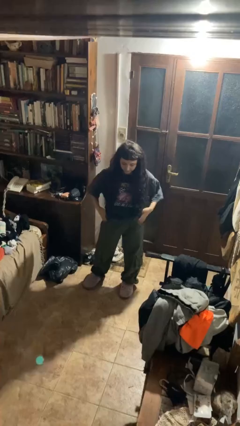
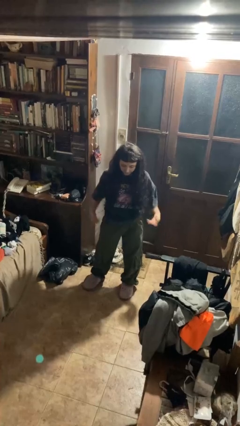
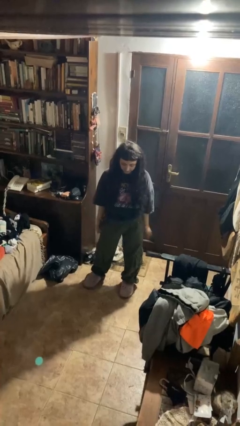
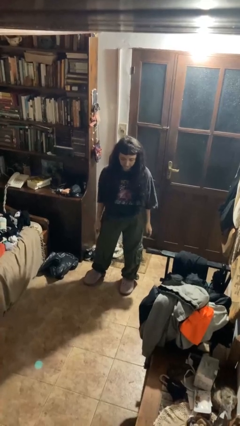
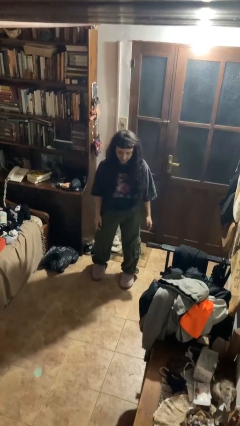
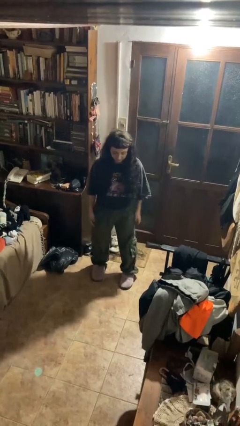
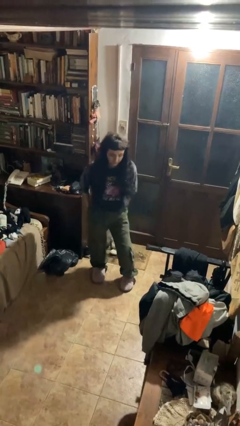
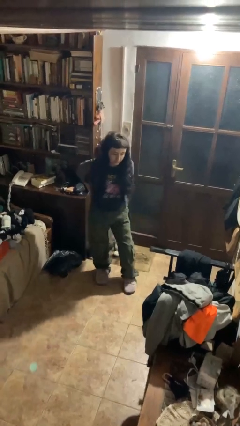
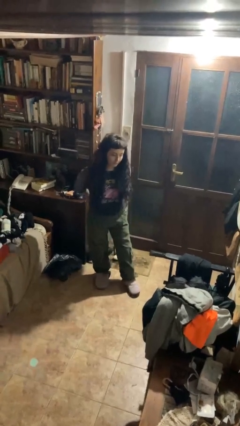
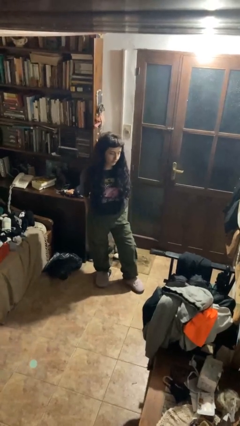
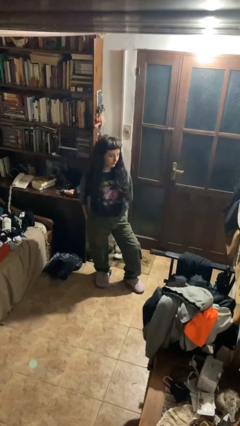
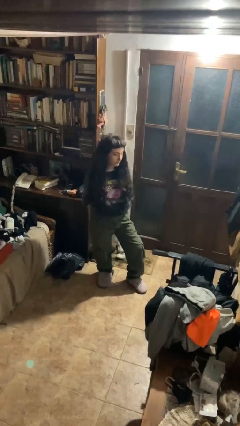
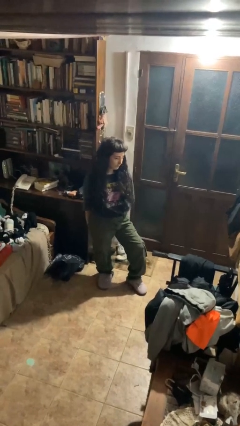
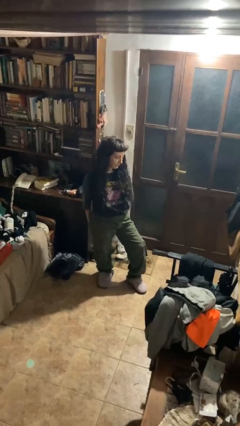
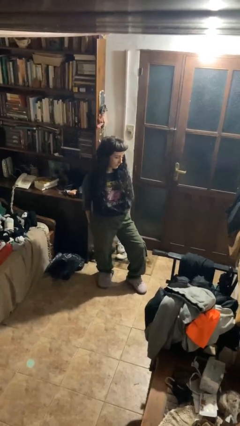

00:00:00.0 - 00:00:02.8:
person puts hands in back pockets

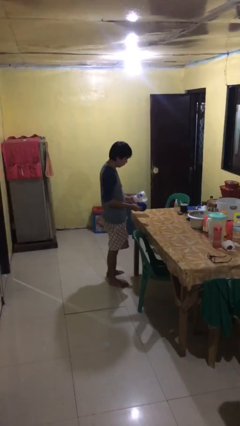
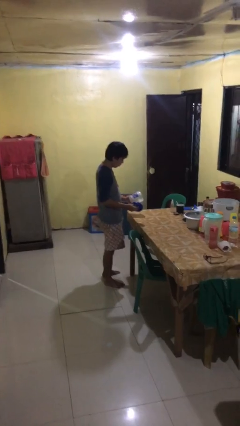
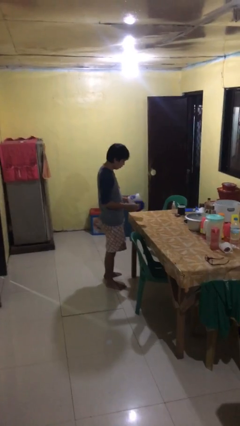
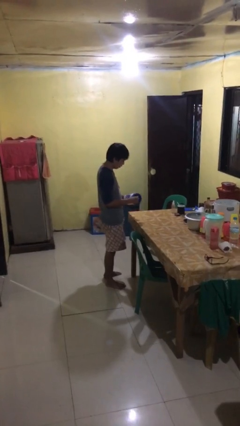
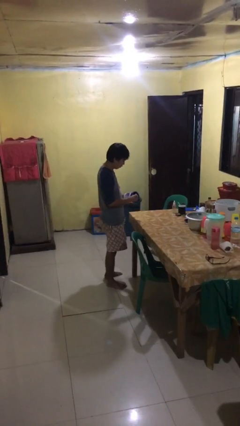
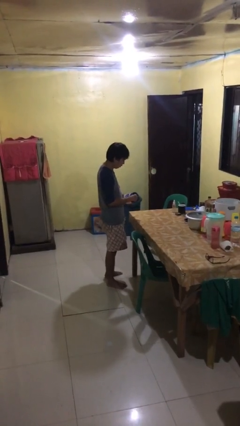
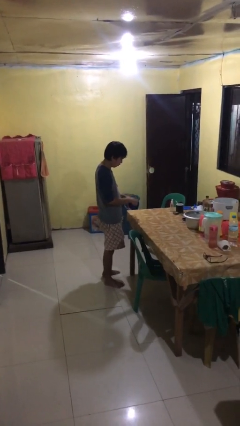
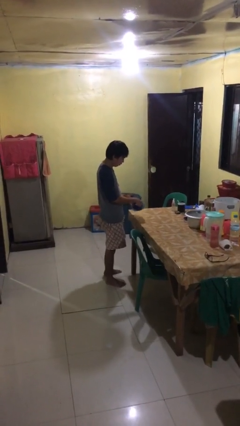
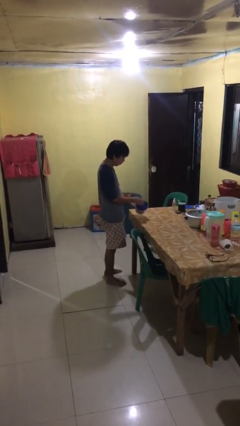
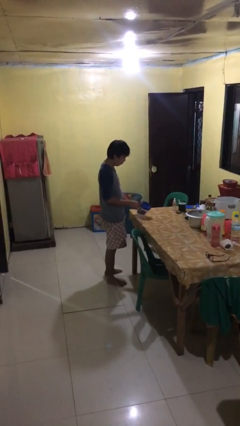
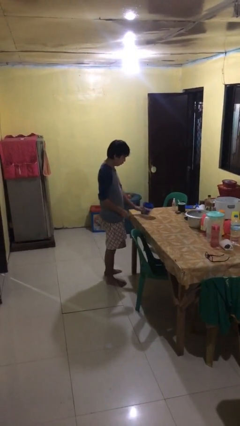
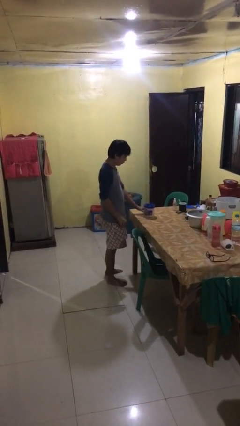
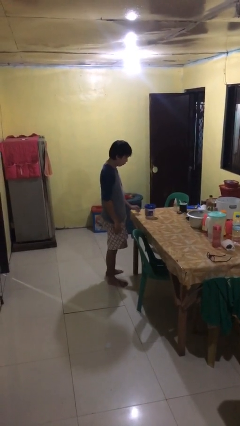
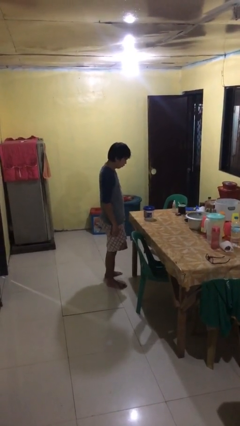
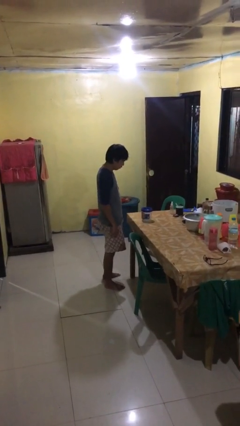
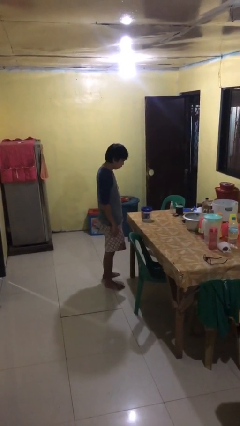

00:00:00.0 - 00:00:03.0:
person closes jar

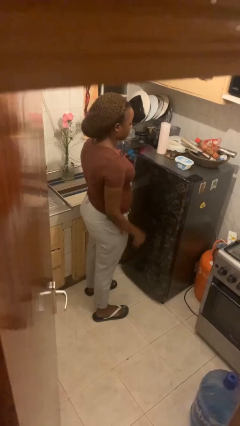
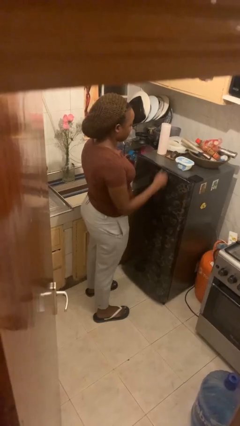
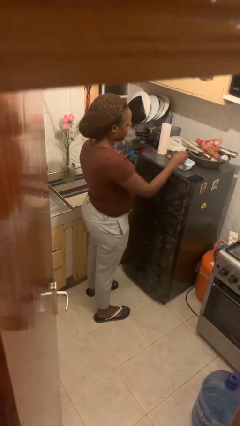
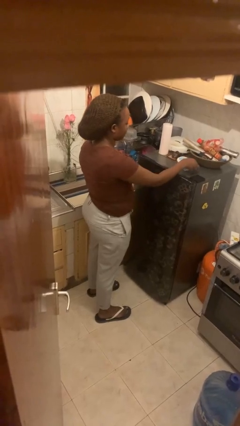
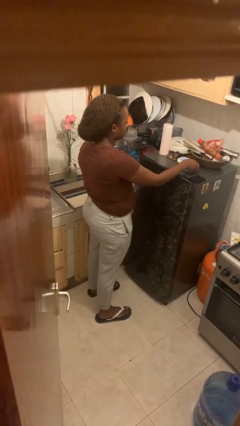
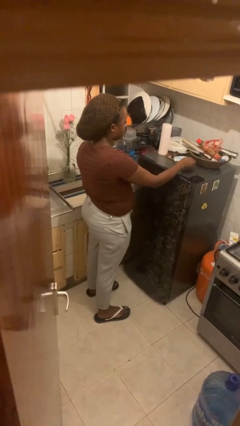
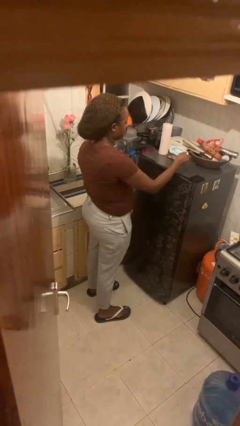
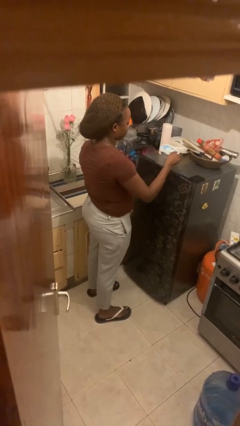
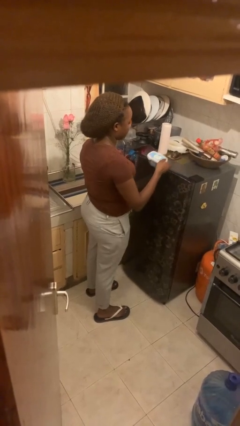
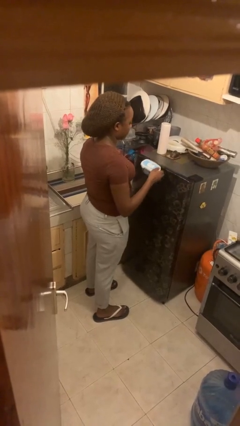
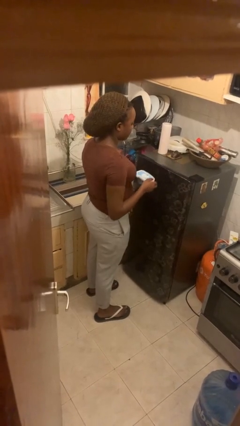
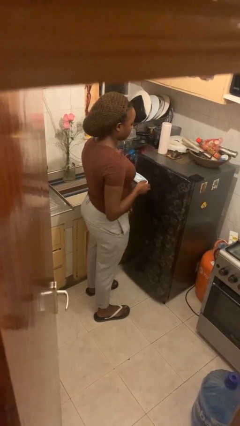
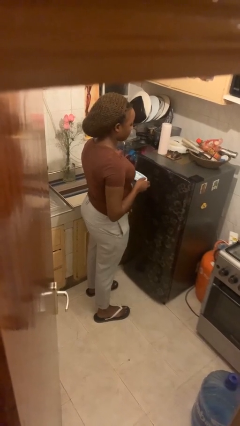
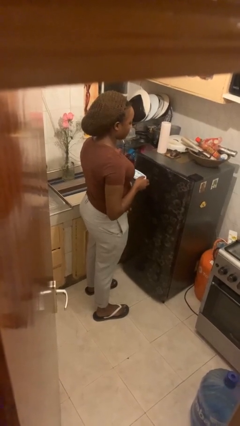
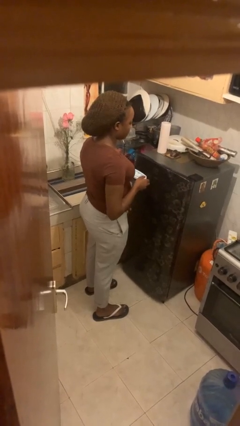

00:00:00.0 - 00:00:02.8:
person picks up object from countertop

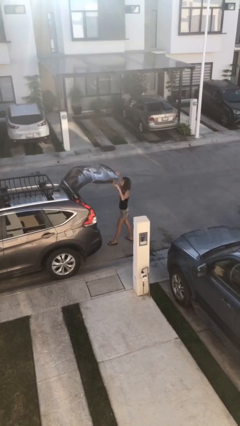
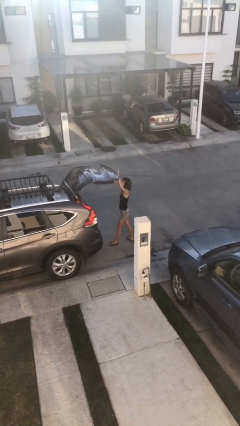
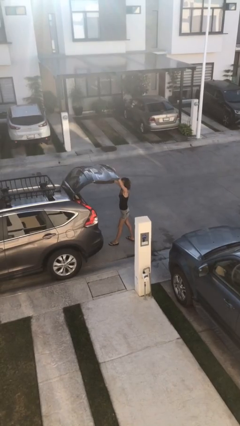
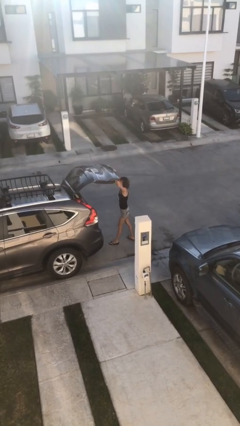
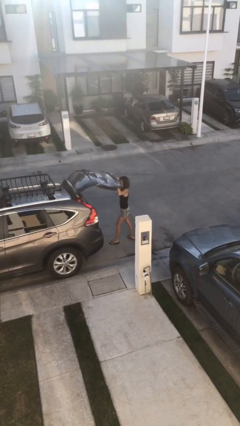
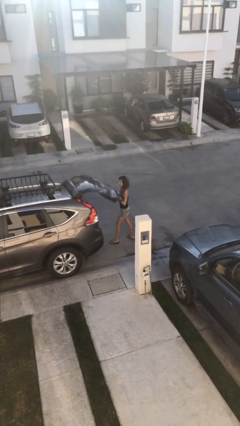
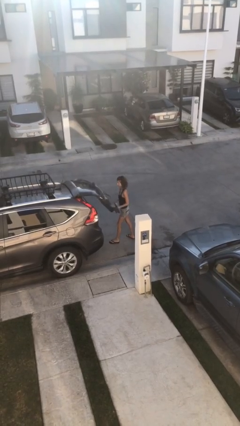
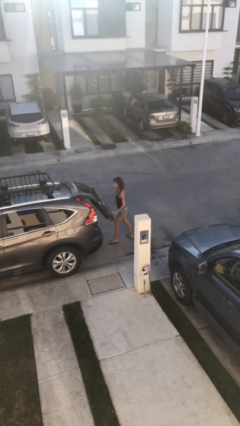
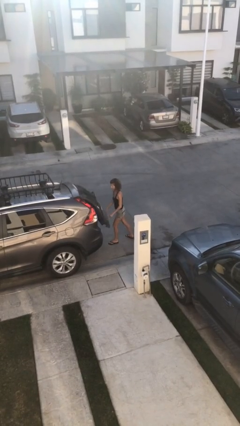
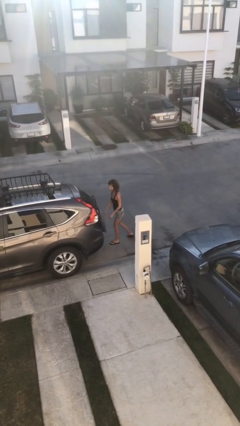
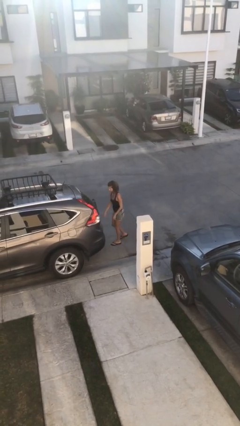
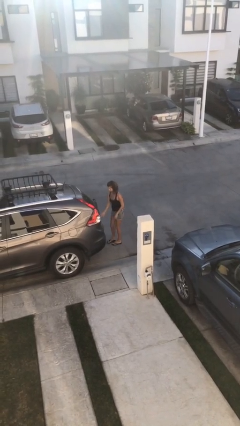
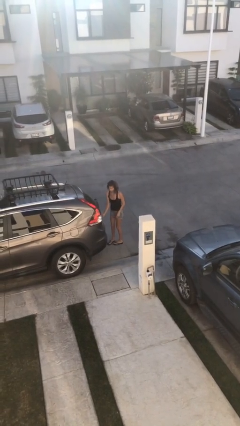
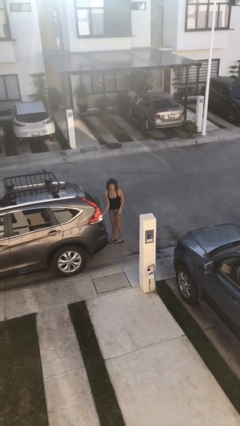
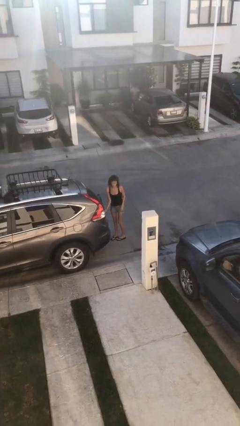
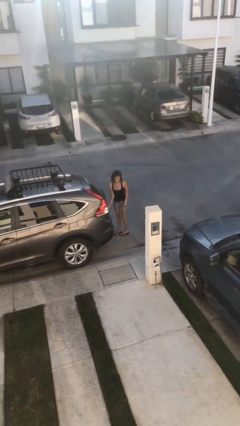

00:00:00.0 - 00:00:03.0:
person closes car trunk

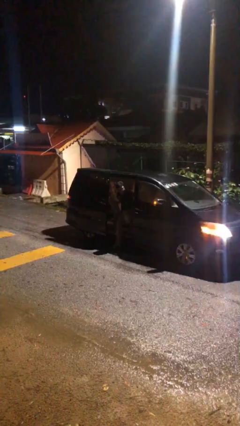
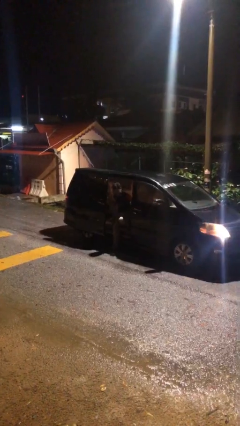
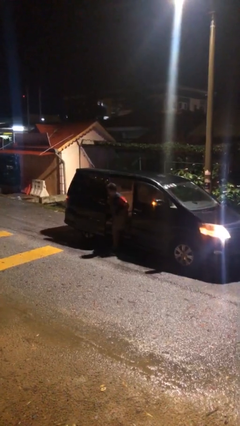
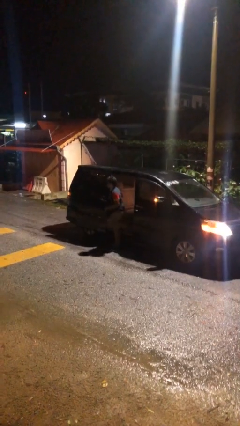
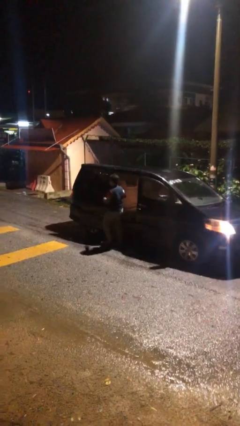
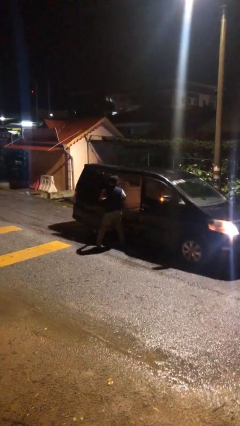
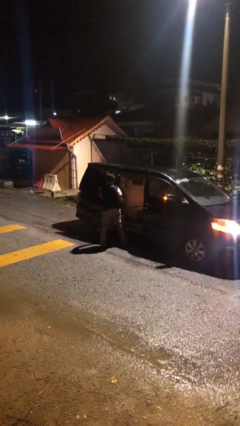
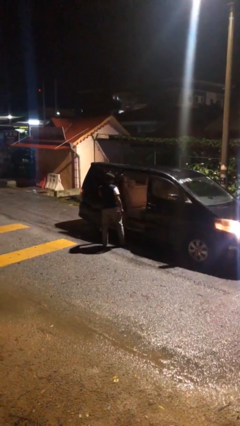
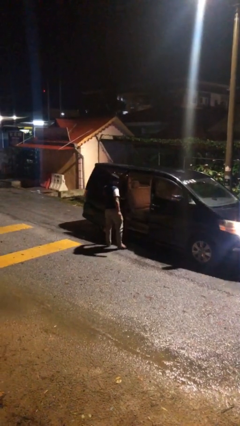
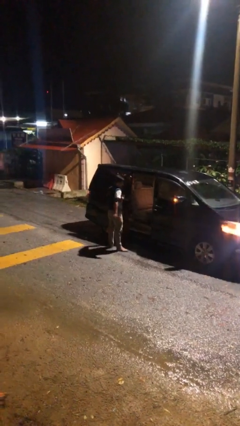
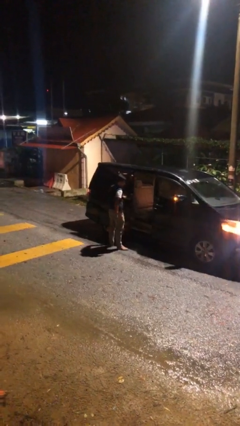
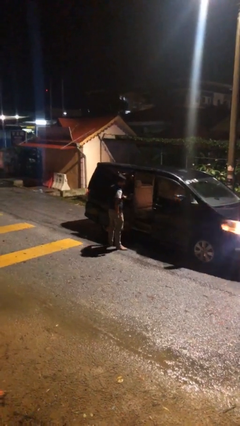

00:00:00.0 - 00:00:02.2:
person exits car

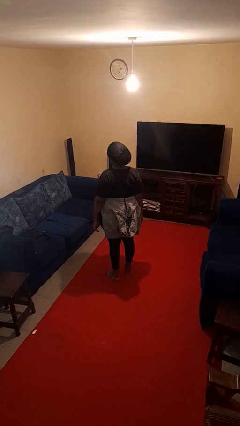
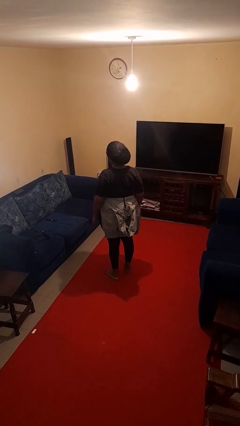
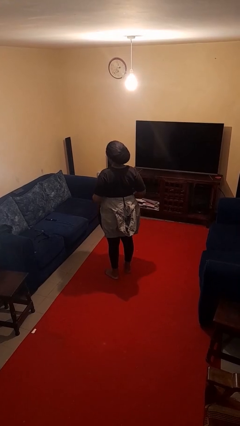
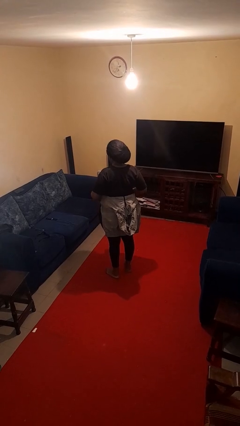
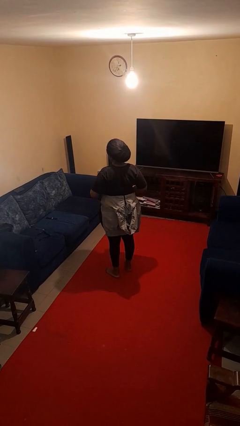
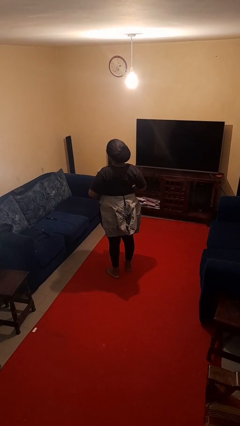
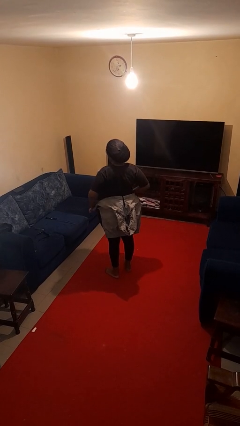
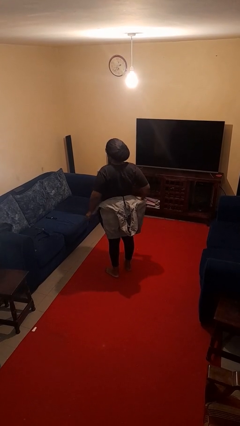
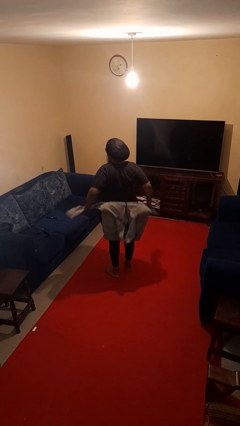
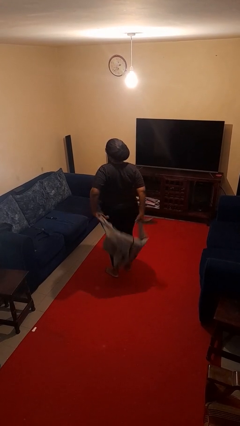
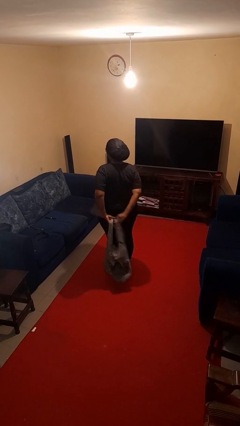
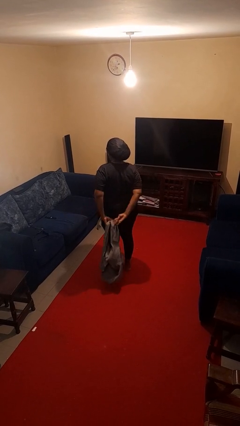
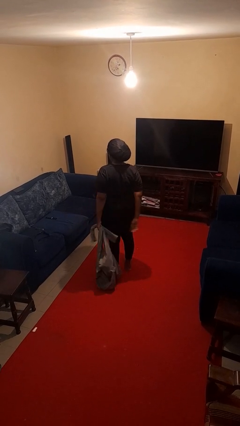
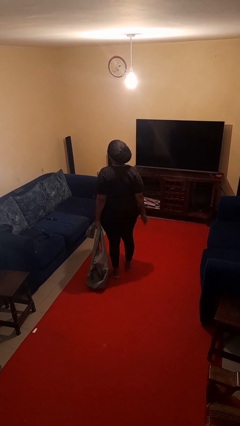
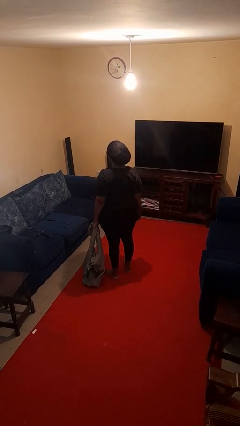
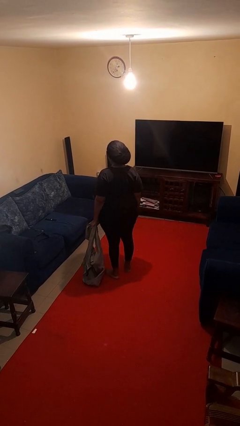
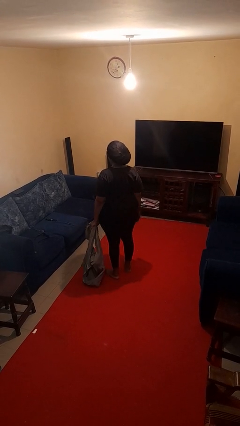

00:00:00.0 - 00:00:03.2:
person unties jacket around waist
